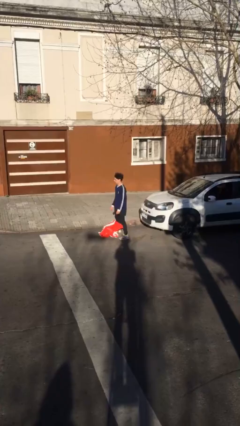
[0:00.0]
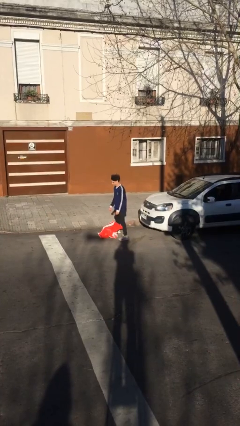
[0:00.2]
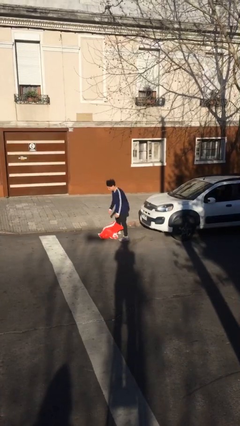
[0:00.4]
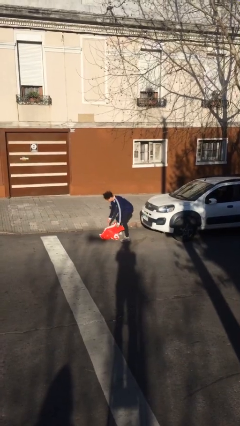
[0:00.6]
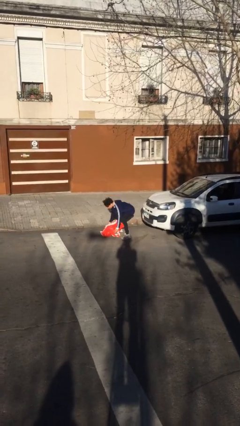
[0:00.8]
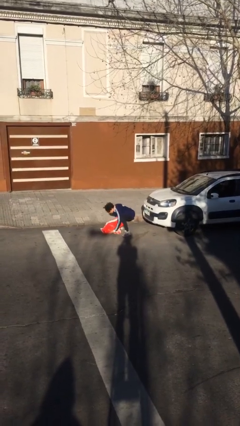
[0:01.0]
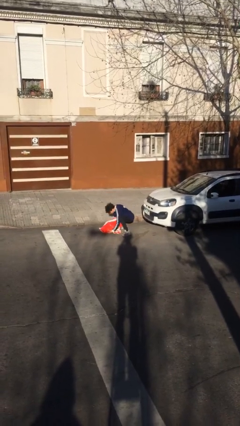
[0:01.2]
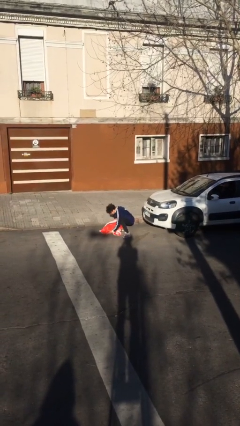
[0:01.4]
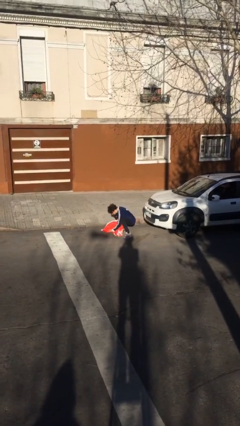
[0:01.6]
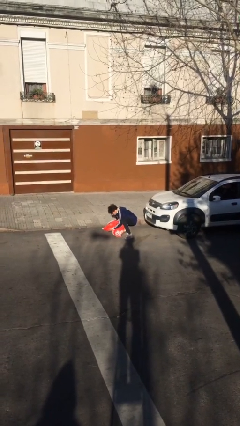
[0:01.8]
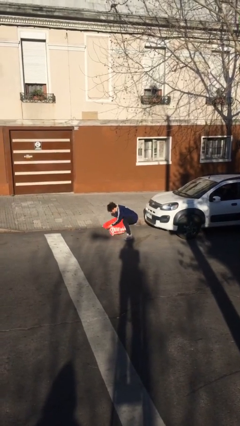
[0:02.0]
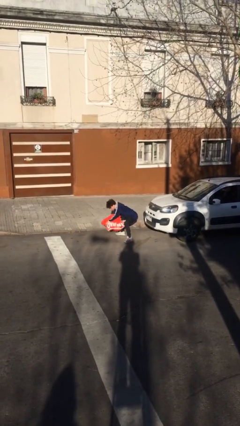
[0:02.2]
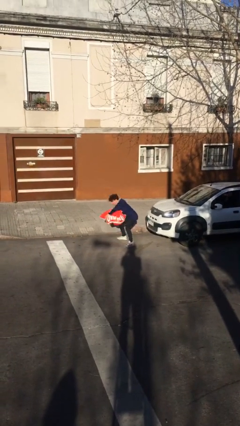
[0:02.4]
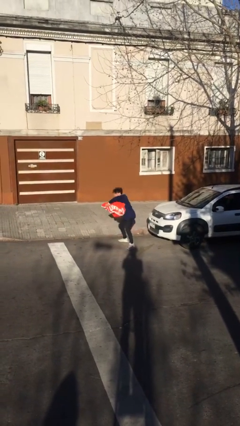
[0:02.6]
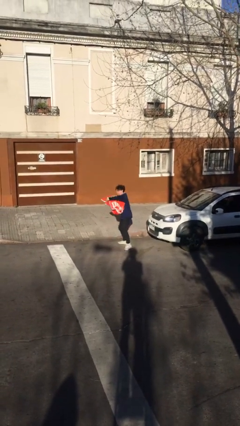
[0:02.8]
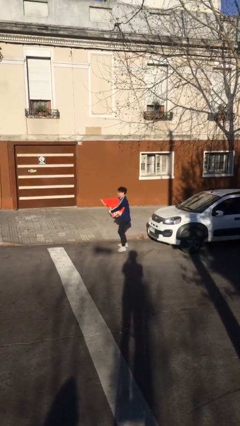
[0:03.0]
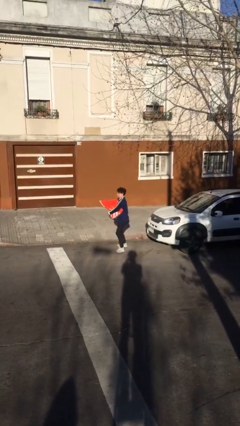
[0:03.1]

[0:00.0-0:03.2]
person picks up object from floor

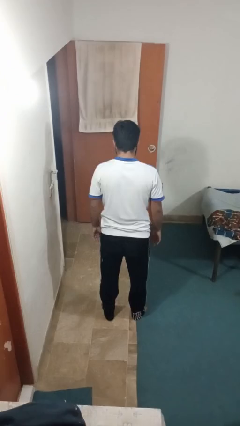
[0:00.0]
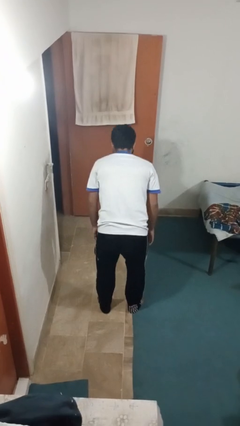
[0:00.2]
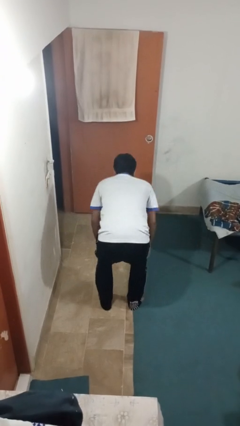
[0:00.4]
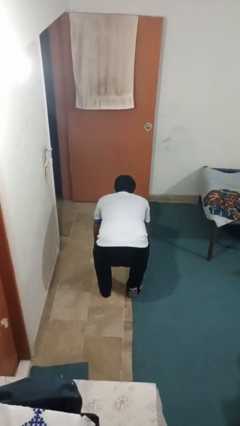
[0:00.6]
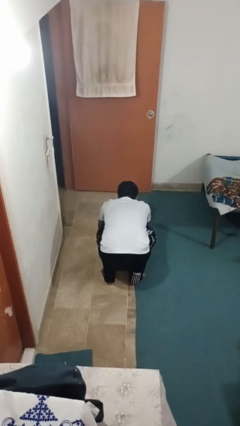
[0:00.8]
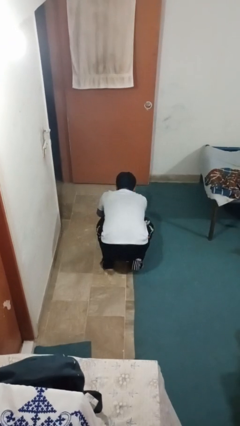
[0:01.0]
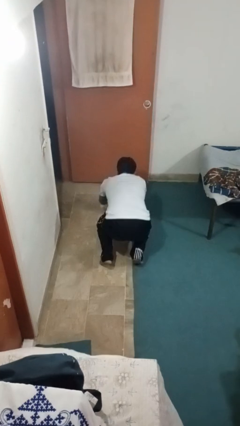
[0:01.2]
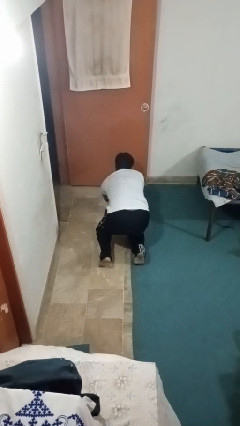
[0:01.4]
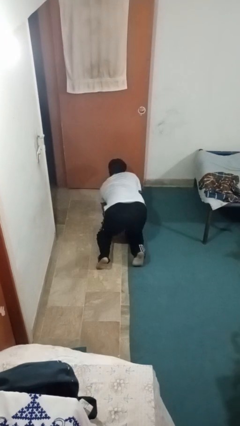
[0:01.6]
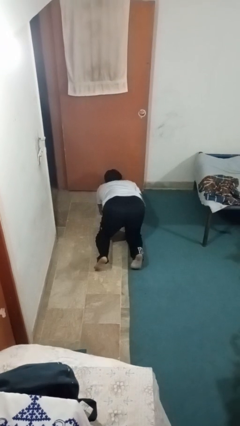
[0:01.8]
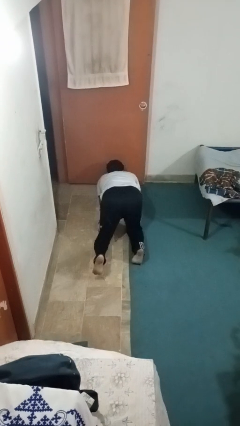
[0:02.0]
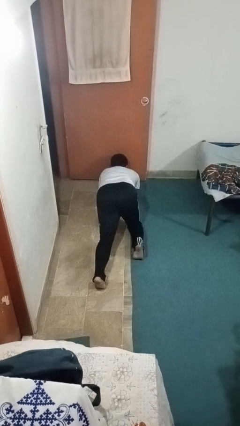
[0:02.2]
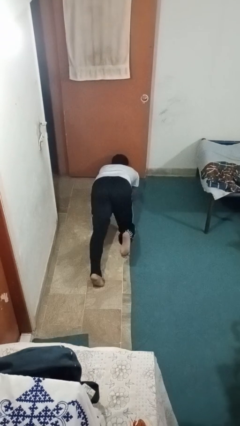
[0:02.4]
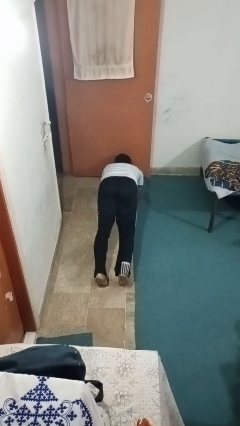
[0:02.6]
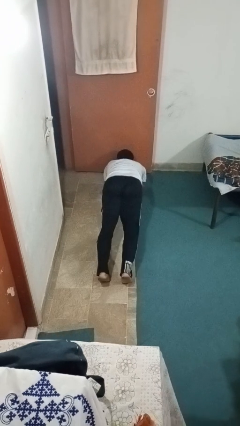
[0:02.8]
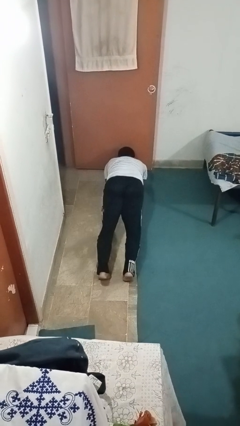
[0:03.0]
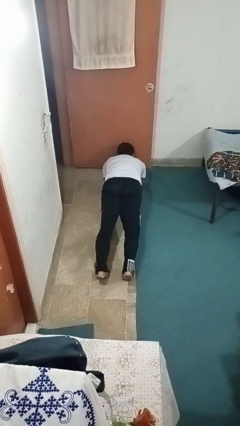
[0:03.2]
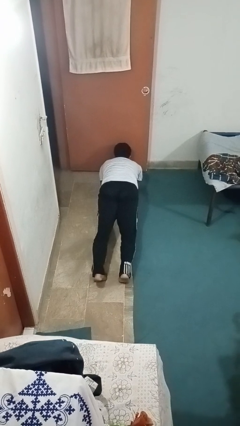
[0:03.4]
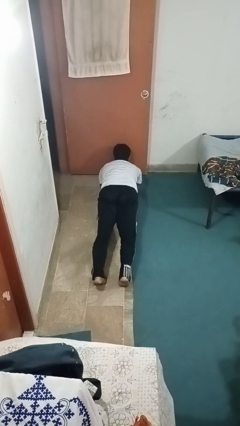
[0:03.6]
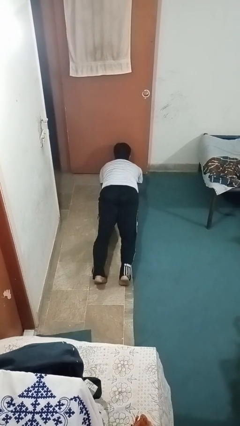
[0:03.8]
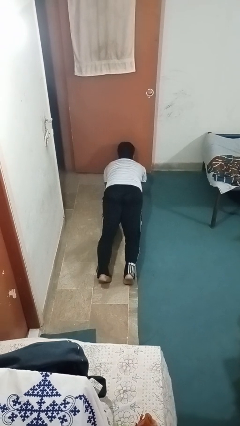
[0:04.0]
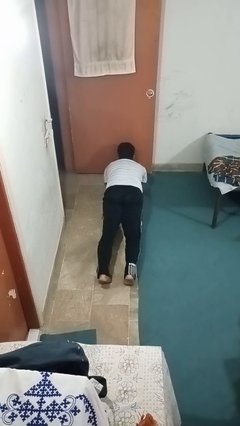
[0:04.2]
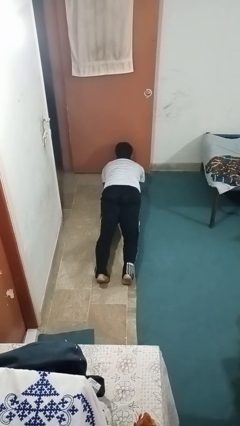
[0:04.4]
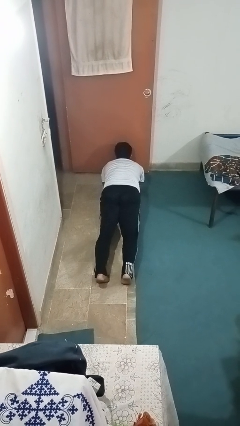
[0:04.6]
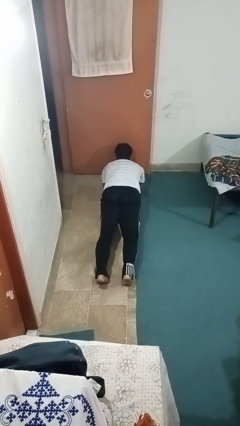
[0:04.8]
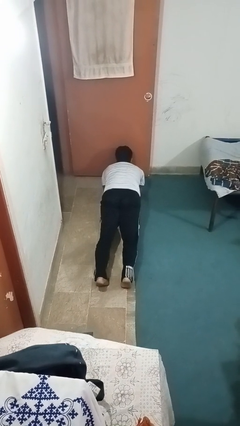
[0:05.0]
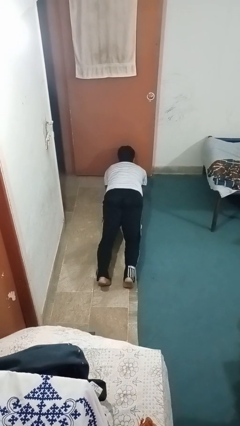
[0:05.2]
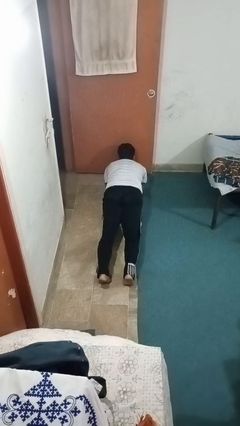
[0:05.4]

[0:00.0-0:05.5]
person exercises with plank

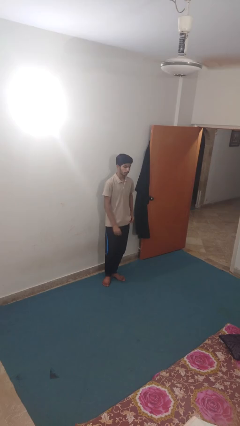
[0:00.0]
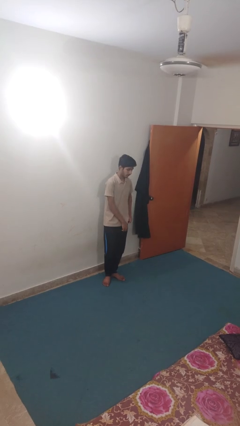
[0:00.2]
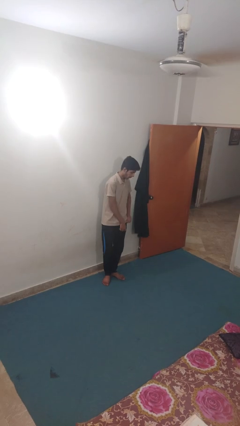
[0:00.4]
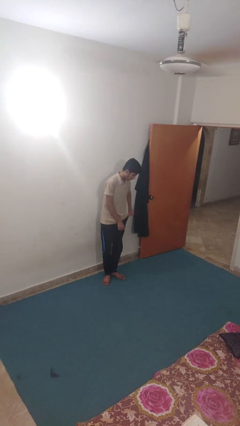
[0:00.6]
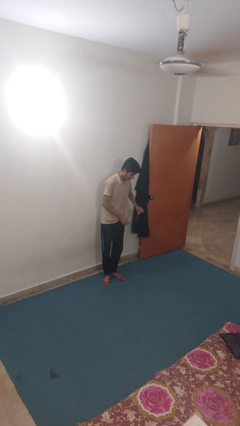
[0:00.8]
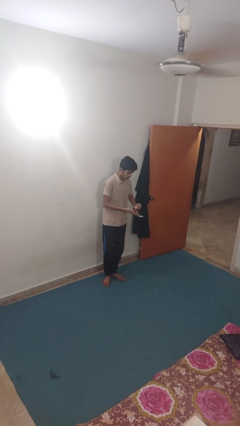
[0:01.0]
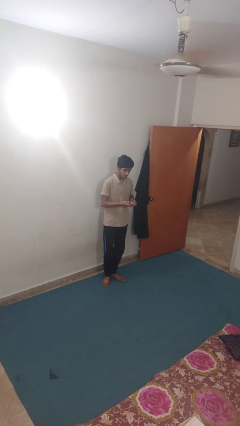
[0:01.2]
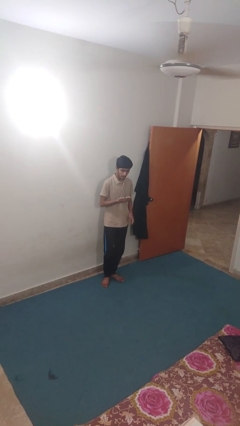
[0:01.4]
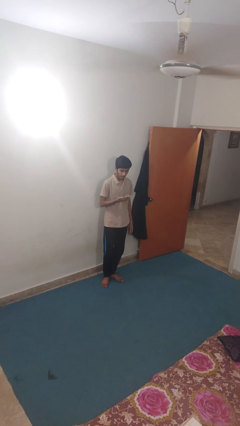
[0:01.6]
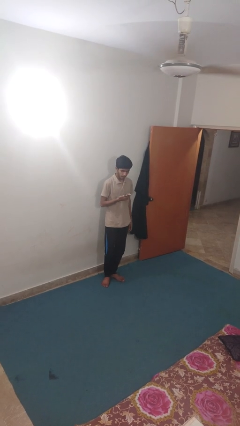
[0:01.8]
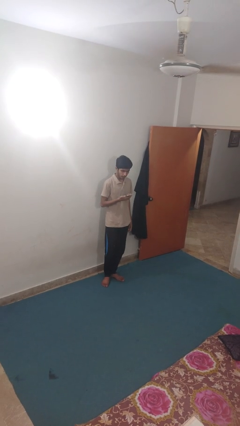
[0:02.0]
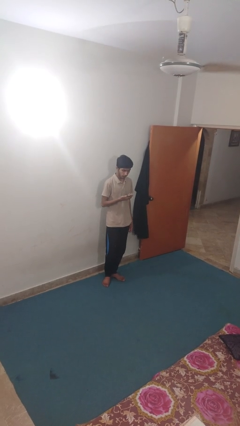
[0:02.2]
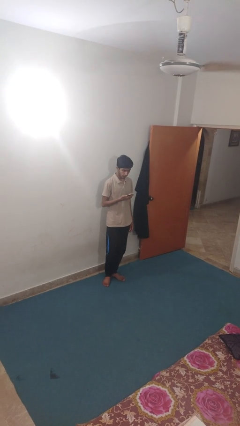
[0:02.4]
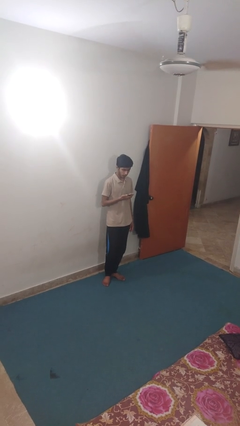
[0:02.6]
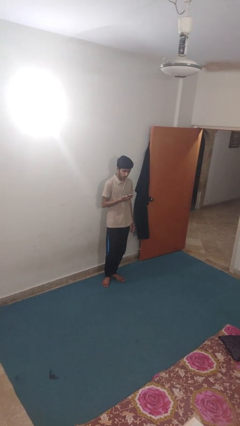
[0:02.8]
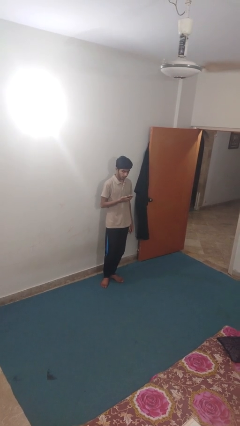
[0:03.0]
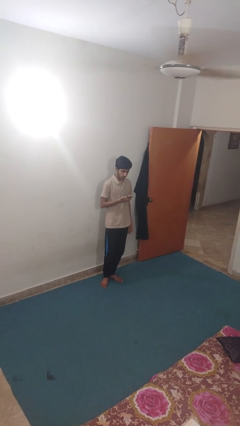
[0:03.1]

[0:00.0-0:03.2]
person takes phone from pocket

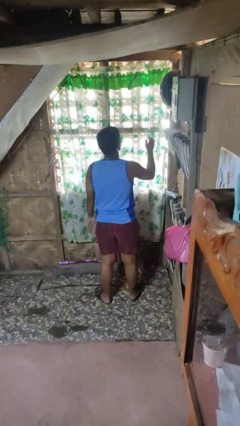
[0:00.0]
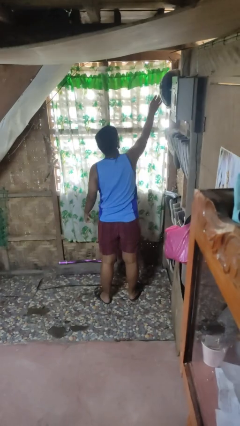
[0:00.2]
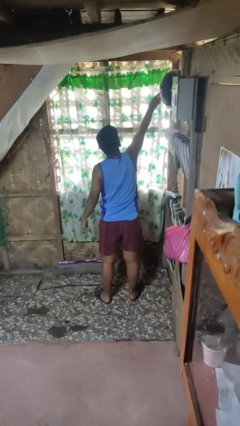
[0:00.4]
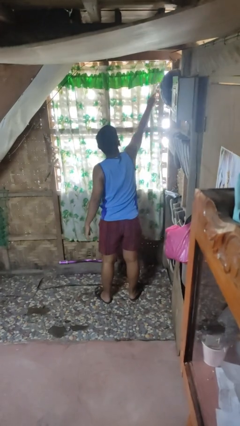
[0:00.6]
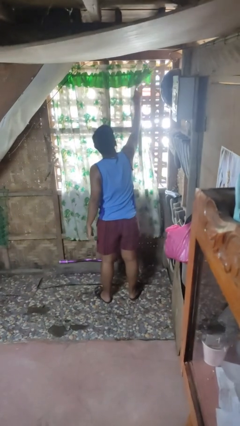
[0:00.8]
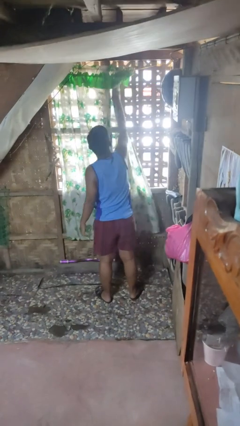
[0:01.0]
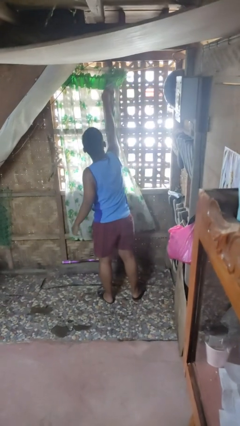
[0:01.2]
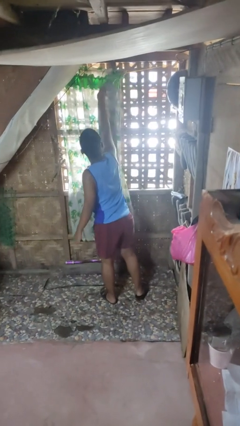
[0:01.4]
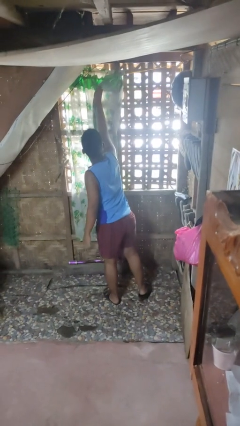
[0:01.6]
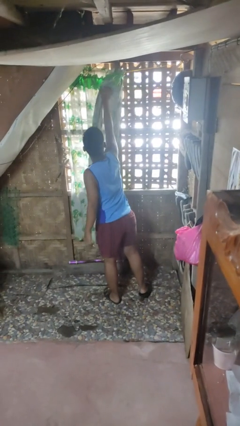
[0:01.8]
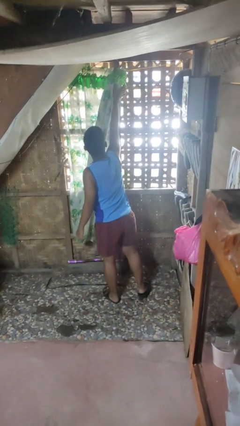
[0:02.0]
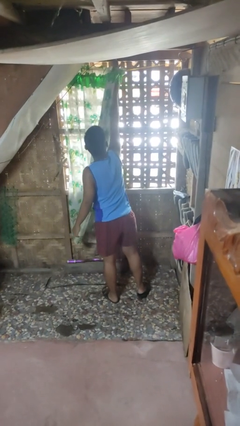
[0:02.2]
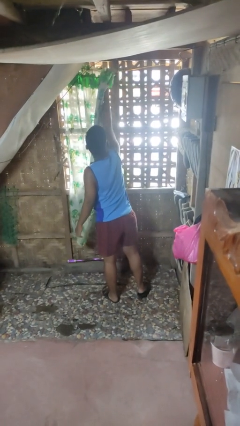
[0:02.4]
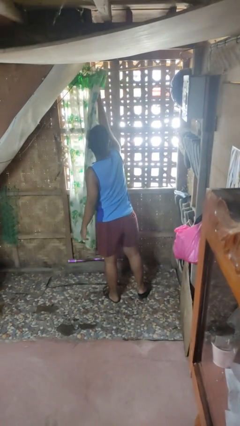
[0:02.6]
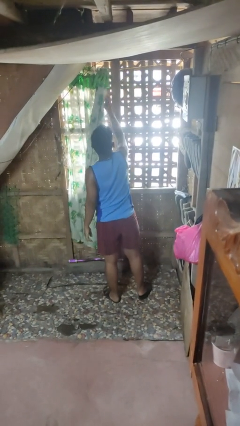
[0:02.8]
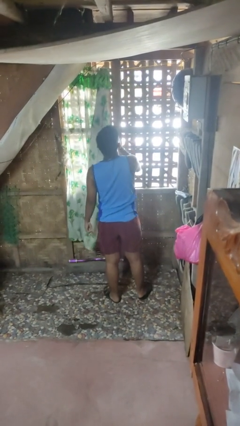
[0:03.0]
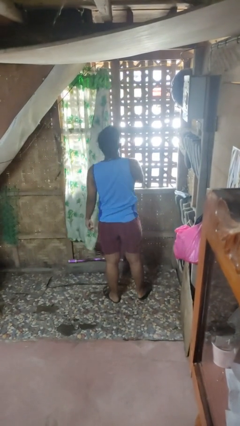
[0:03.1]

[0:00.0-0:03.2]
person opens curtains

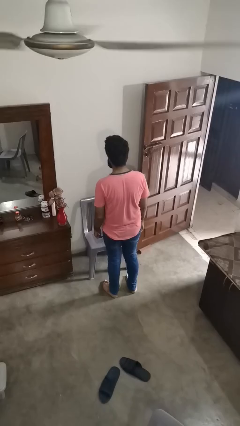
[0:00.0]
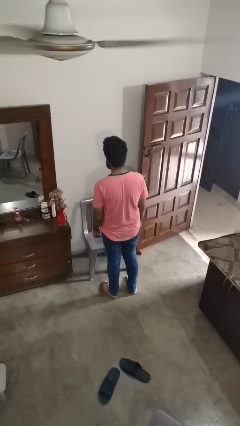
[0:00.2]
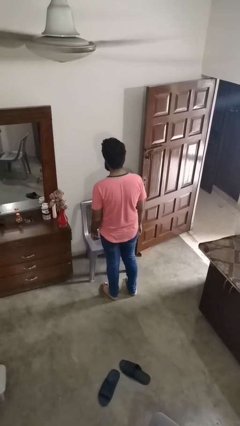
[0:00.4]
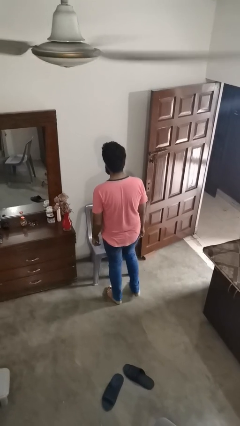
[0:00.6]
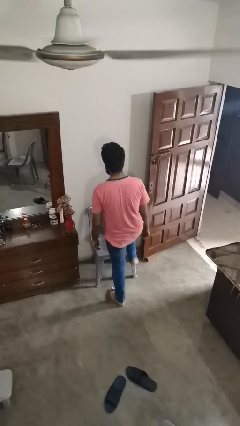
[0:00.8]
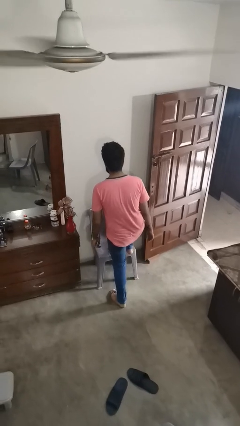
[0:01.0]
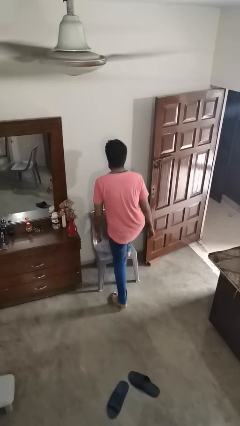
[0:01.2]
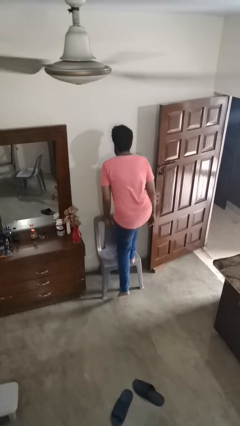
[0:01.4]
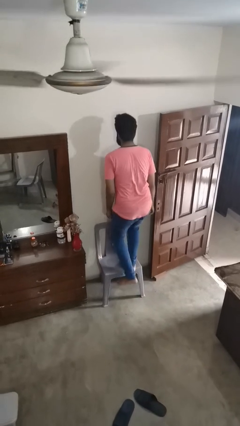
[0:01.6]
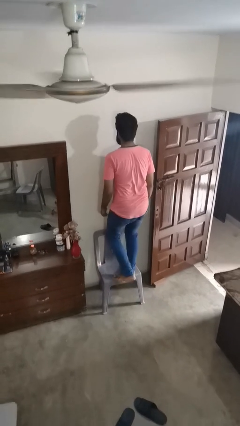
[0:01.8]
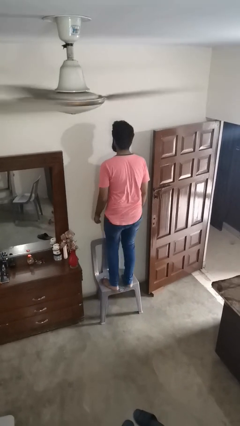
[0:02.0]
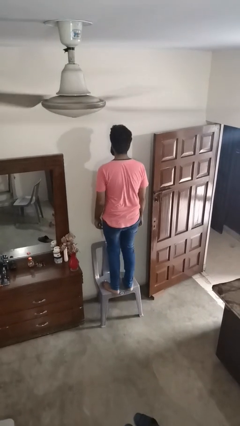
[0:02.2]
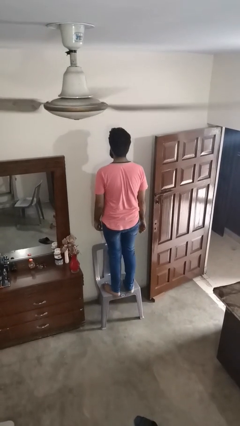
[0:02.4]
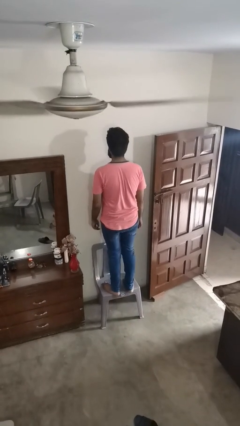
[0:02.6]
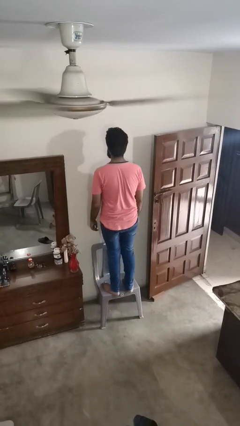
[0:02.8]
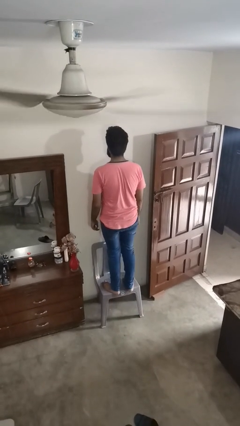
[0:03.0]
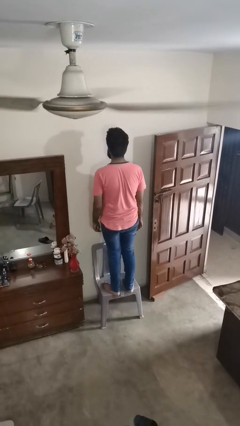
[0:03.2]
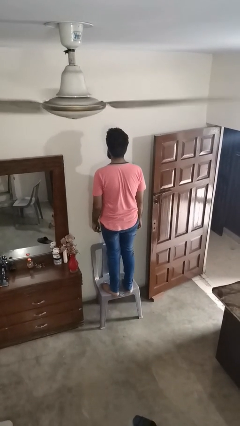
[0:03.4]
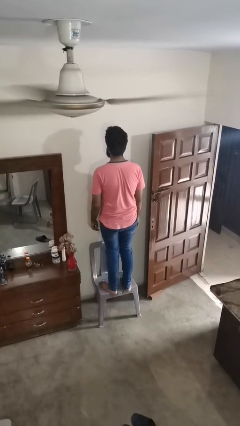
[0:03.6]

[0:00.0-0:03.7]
person climbs on chair
